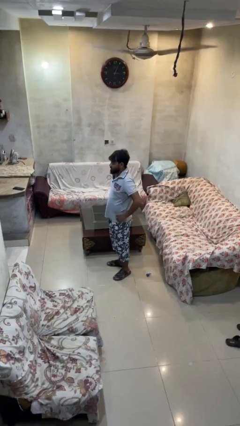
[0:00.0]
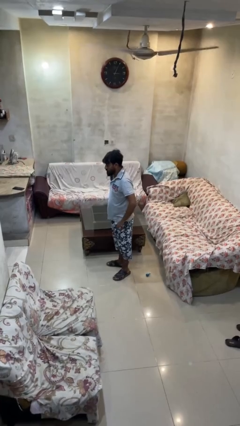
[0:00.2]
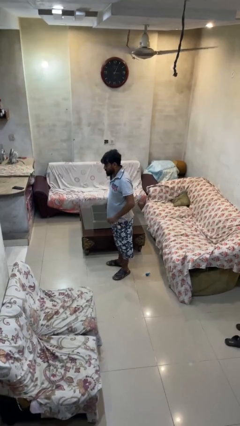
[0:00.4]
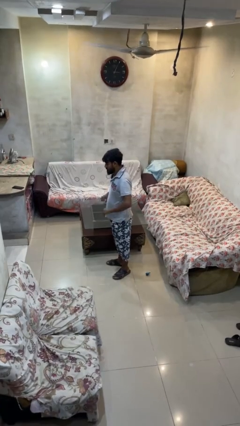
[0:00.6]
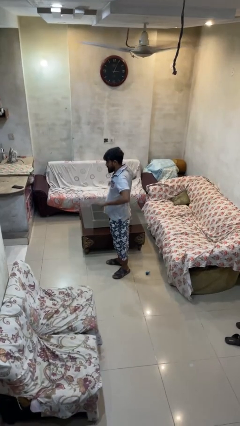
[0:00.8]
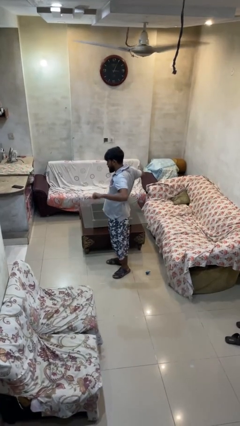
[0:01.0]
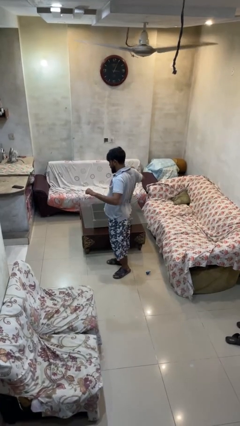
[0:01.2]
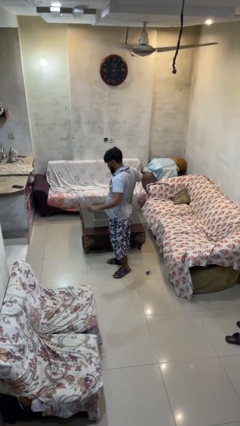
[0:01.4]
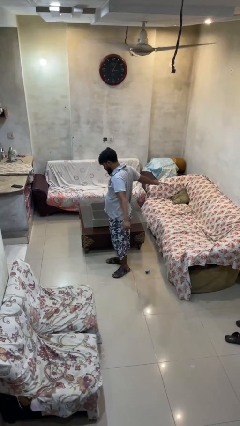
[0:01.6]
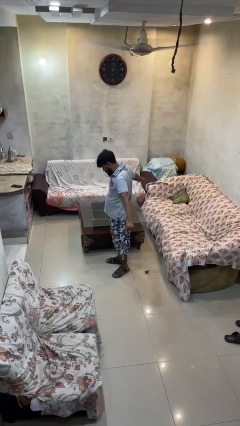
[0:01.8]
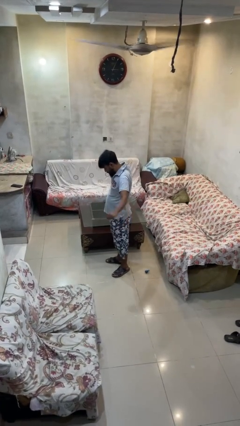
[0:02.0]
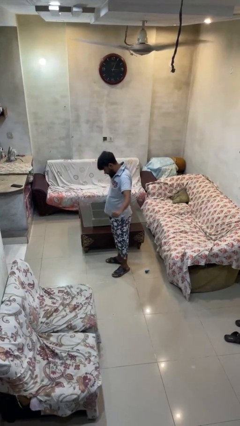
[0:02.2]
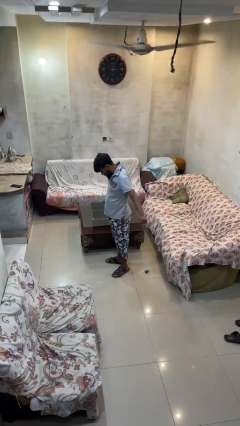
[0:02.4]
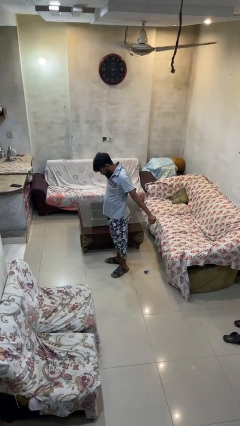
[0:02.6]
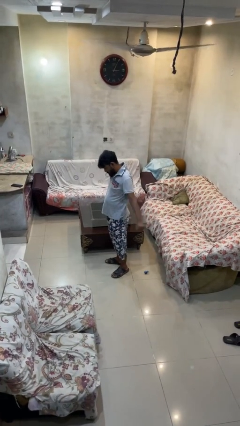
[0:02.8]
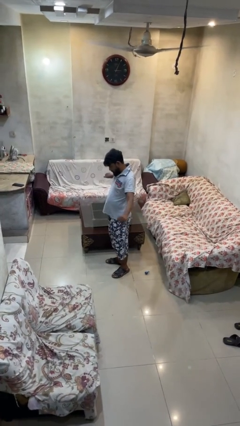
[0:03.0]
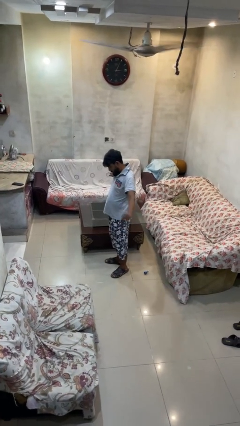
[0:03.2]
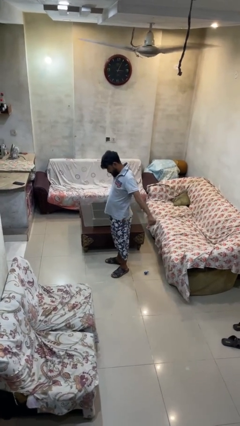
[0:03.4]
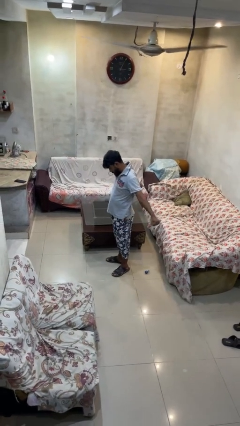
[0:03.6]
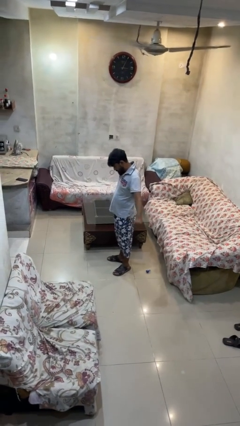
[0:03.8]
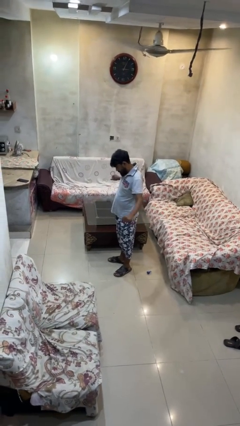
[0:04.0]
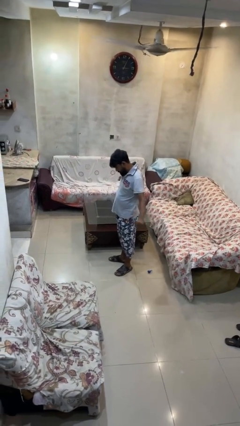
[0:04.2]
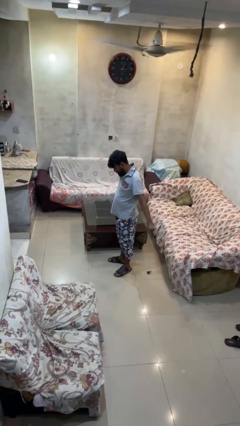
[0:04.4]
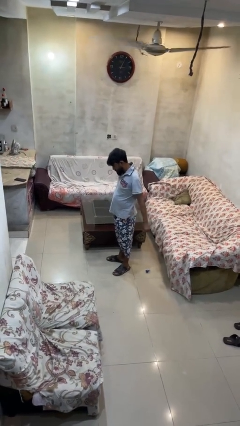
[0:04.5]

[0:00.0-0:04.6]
person stretches arms to side

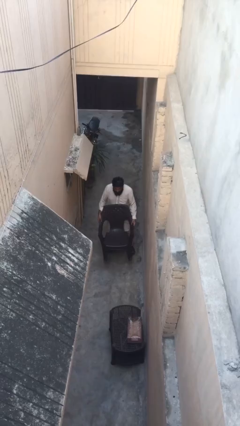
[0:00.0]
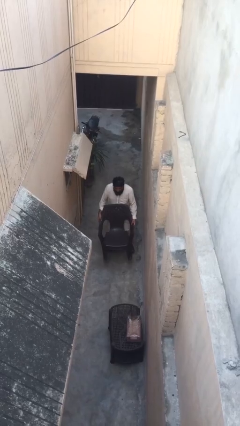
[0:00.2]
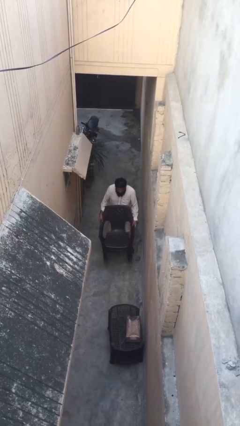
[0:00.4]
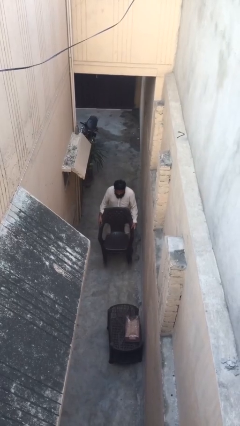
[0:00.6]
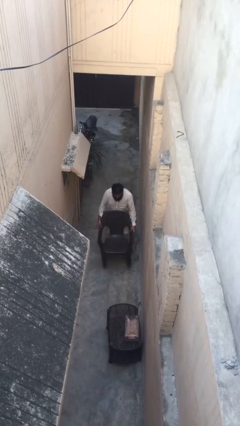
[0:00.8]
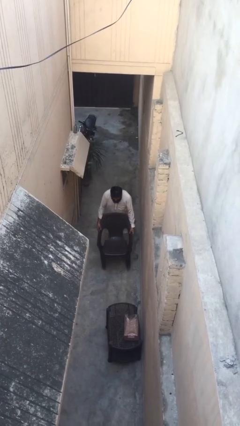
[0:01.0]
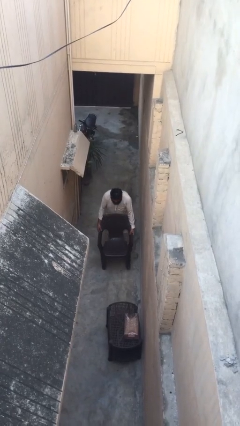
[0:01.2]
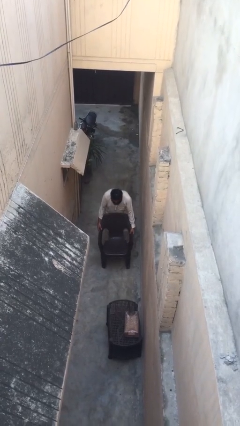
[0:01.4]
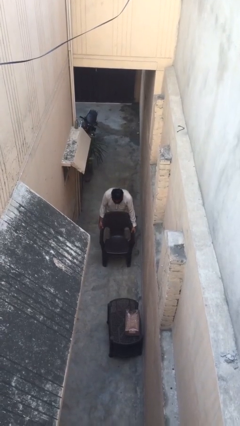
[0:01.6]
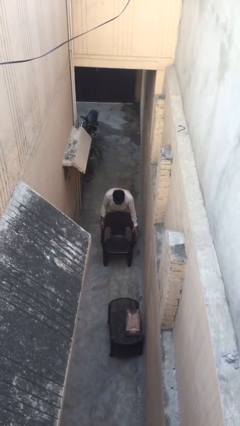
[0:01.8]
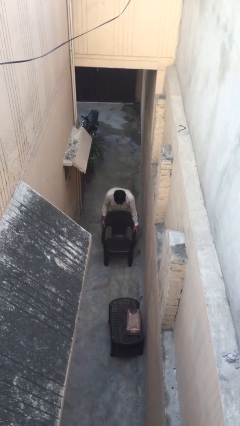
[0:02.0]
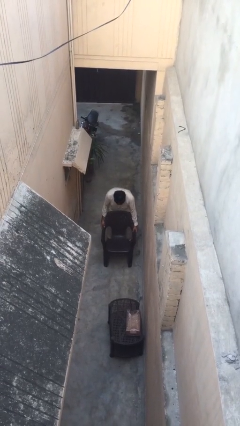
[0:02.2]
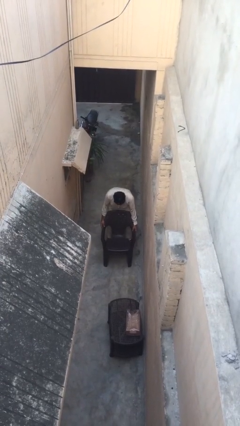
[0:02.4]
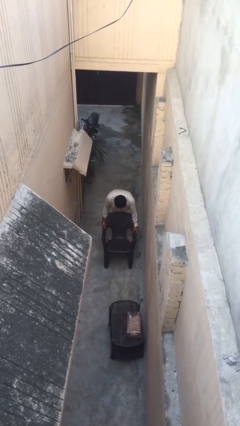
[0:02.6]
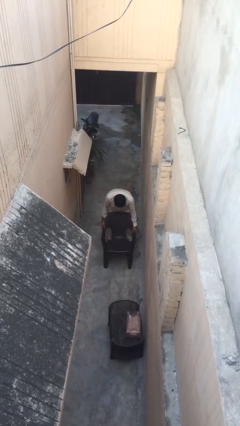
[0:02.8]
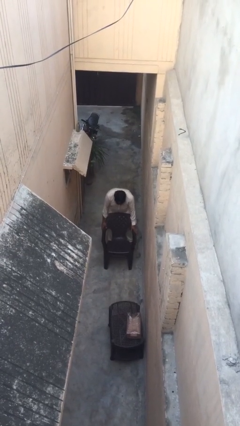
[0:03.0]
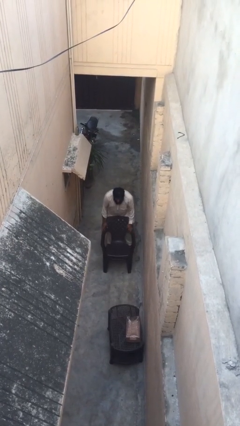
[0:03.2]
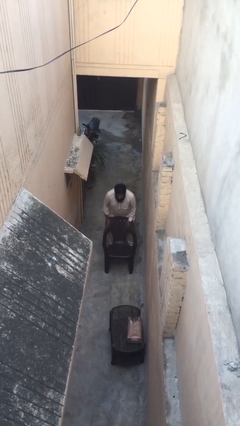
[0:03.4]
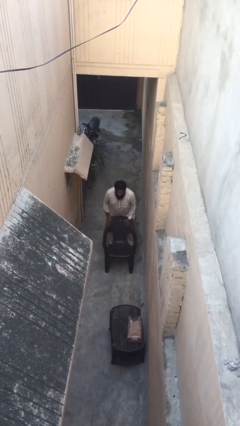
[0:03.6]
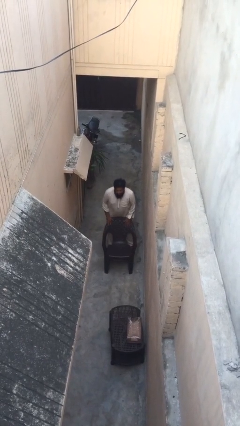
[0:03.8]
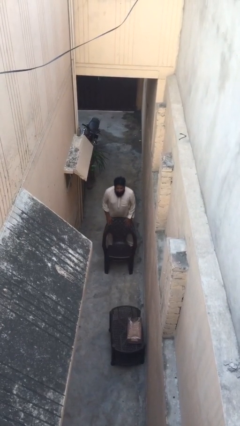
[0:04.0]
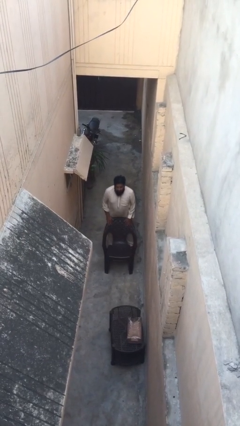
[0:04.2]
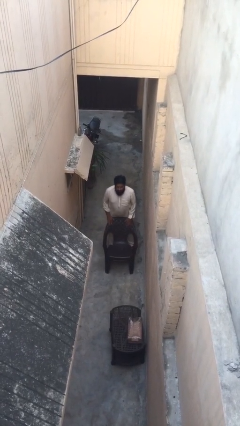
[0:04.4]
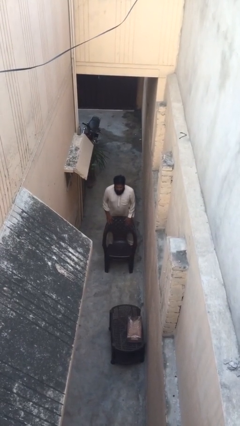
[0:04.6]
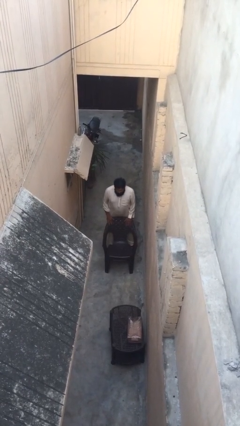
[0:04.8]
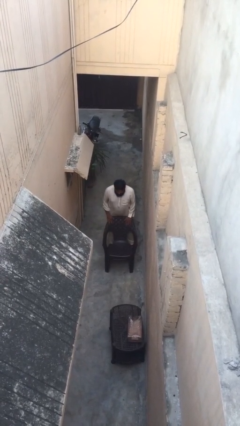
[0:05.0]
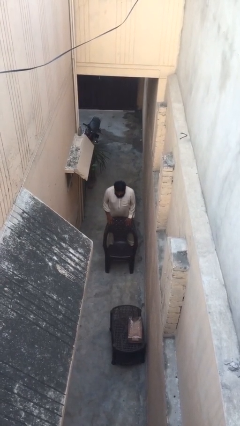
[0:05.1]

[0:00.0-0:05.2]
person puts down object on floor

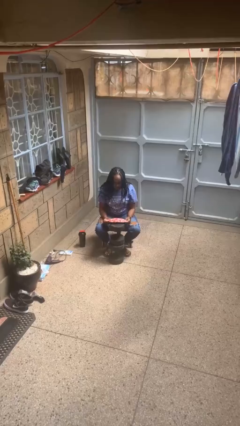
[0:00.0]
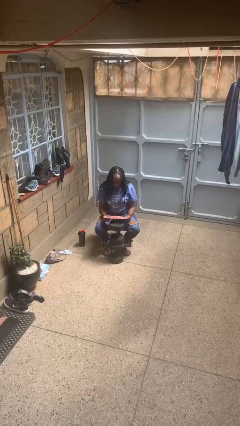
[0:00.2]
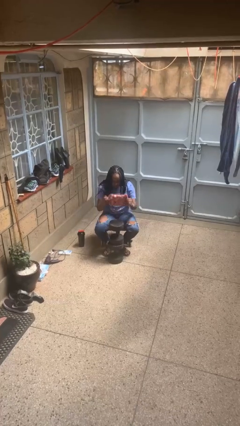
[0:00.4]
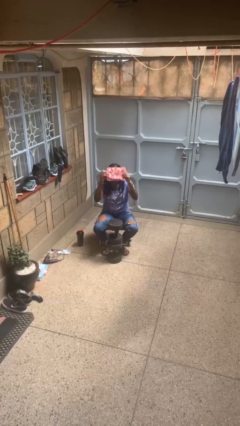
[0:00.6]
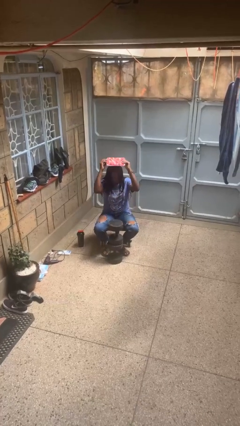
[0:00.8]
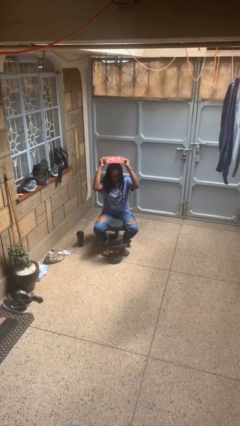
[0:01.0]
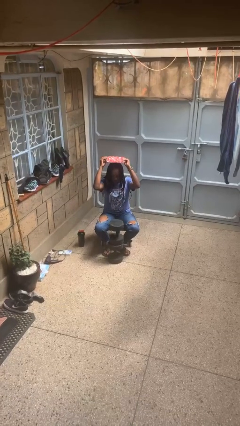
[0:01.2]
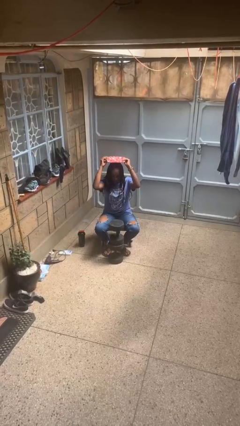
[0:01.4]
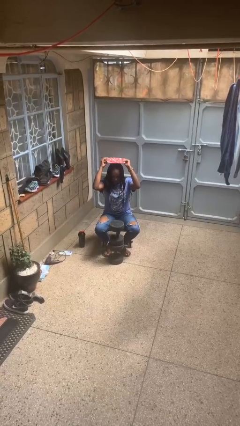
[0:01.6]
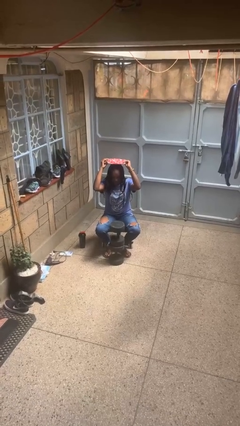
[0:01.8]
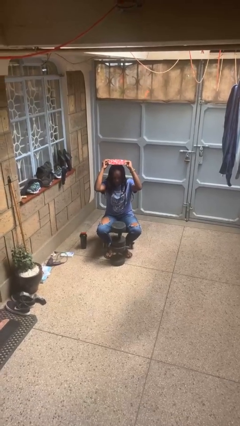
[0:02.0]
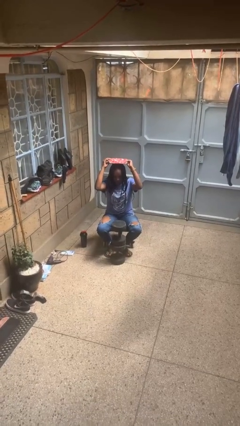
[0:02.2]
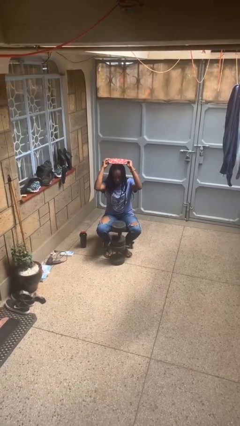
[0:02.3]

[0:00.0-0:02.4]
person holds object above head

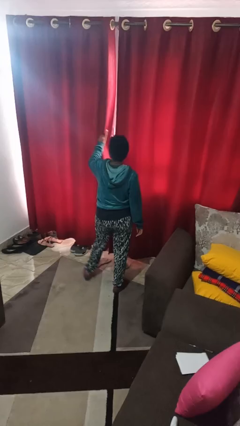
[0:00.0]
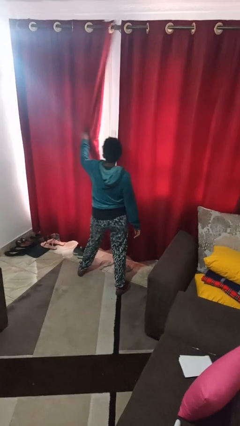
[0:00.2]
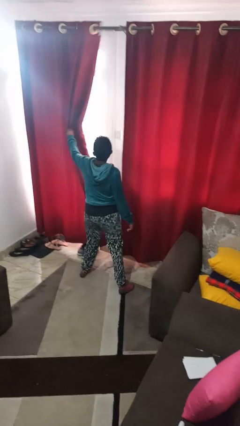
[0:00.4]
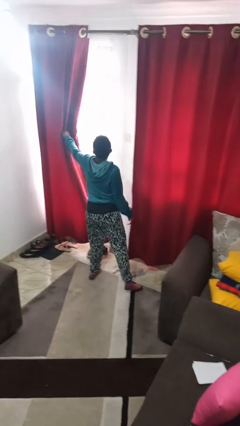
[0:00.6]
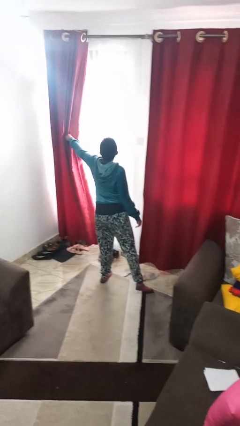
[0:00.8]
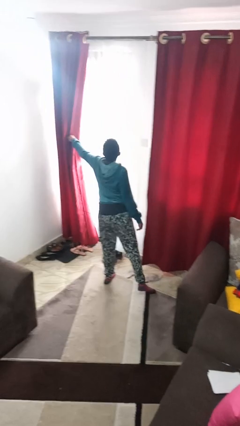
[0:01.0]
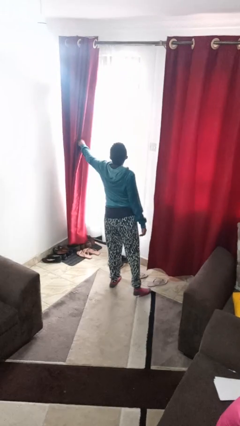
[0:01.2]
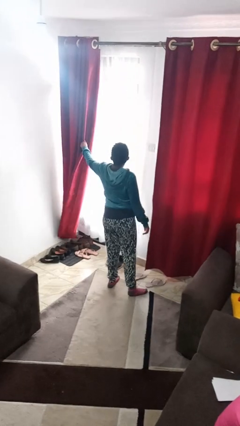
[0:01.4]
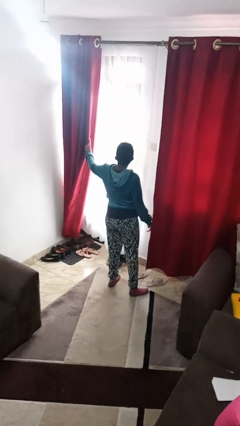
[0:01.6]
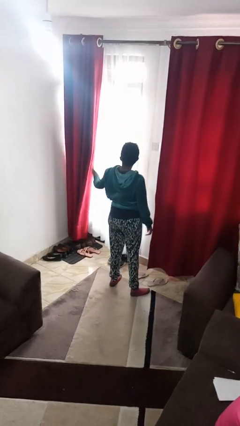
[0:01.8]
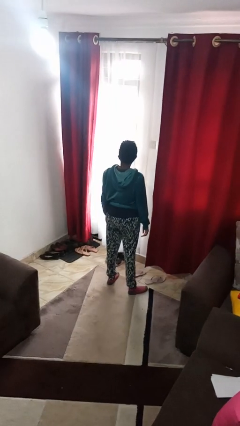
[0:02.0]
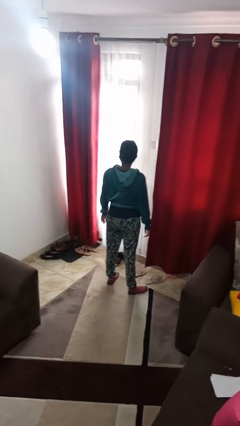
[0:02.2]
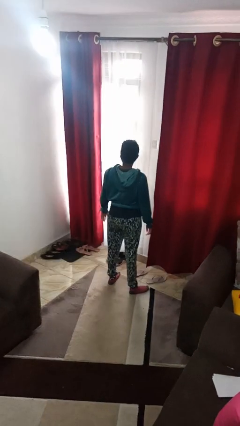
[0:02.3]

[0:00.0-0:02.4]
person opens curtains

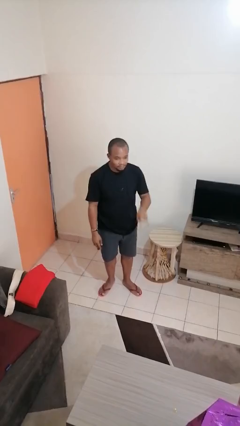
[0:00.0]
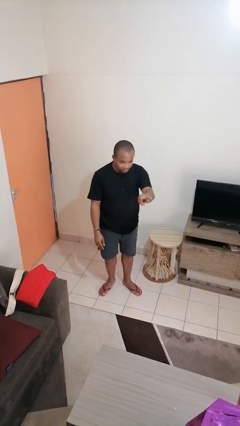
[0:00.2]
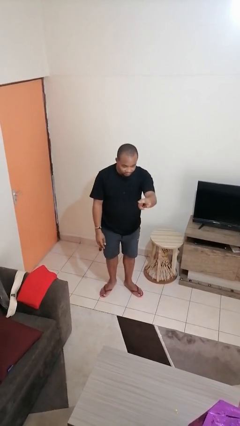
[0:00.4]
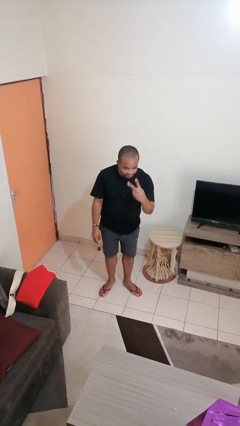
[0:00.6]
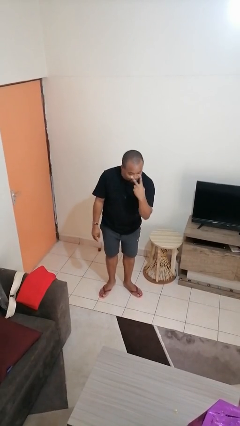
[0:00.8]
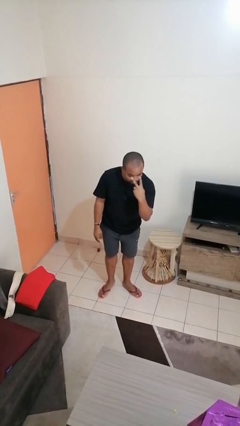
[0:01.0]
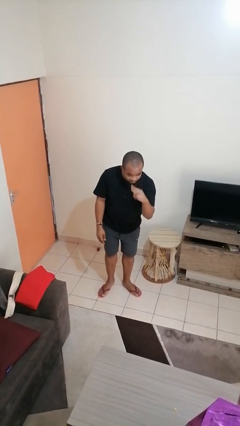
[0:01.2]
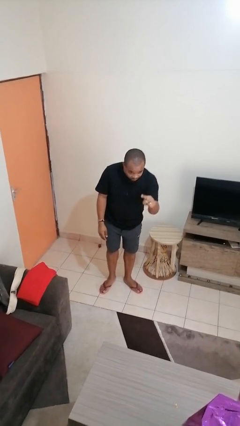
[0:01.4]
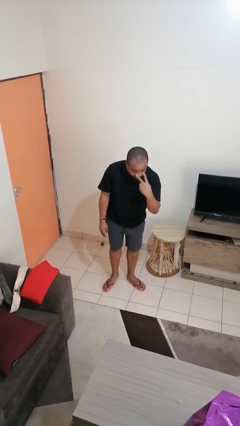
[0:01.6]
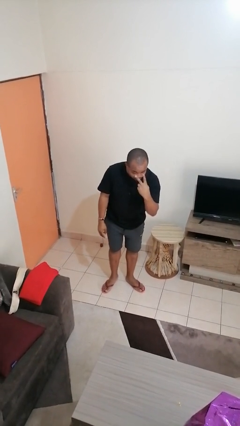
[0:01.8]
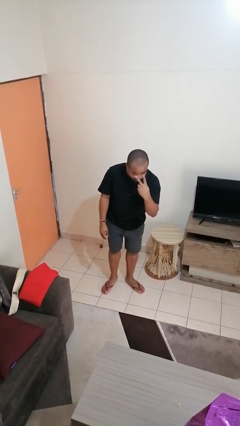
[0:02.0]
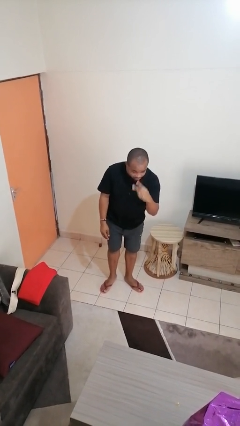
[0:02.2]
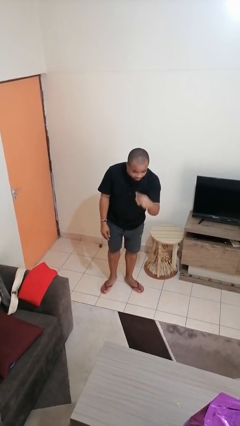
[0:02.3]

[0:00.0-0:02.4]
person gestures watch closely

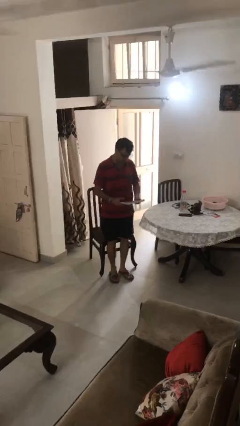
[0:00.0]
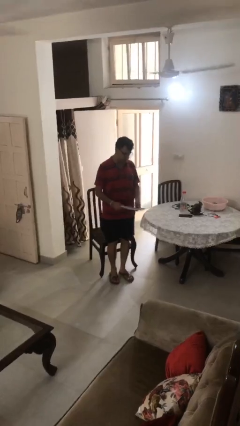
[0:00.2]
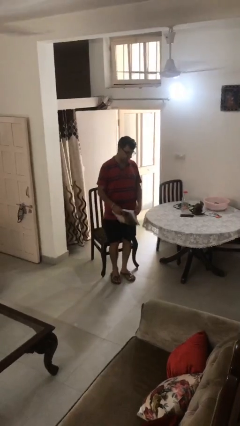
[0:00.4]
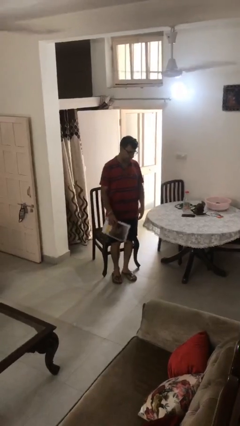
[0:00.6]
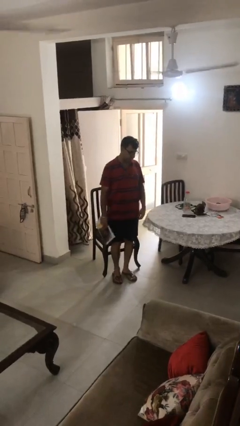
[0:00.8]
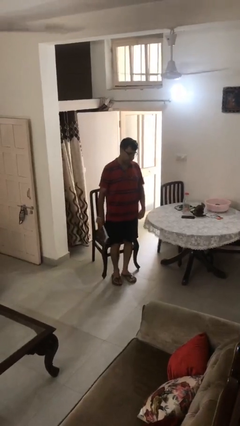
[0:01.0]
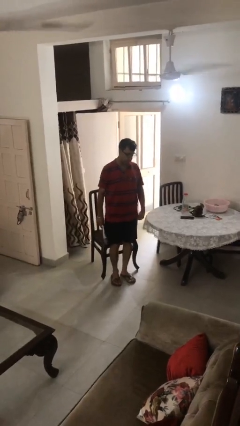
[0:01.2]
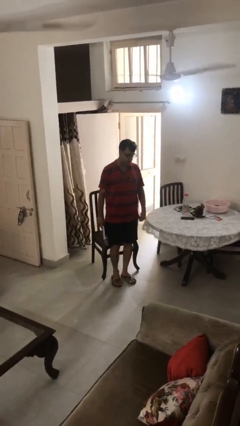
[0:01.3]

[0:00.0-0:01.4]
person stands up
